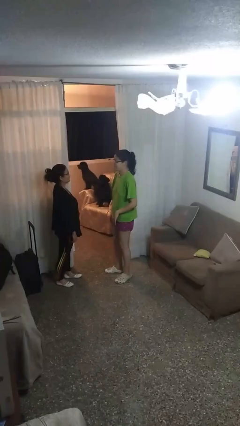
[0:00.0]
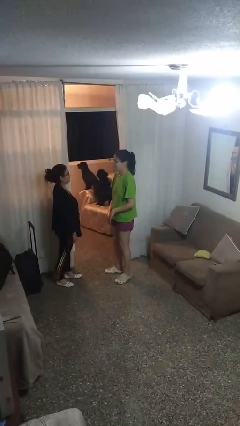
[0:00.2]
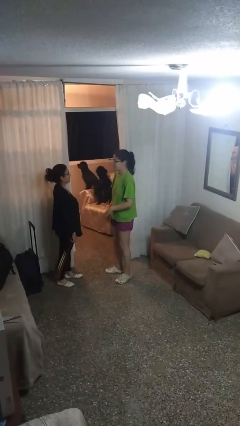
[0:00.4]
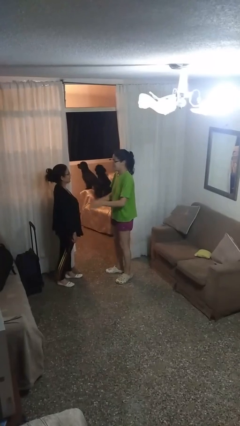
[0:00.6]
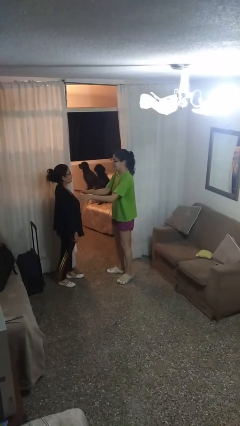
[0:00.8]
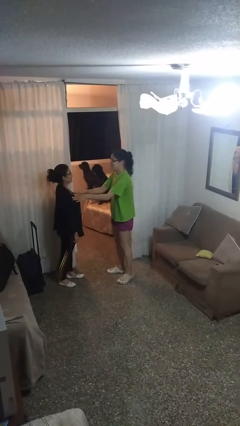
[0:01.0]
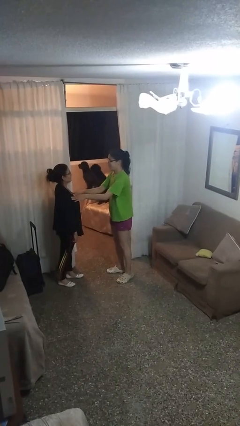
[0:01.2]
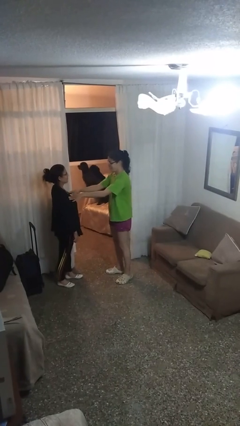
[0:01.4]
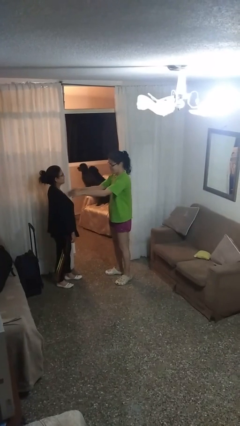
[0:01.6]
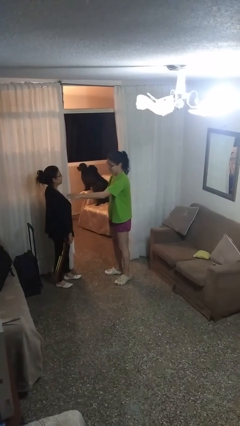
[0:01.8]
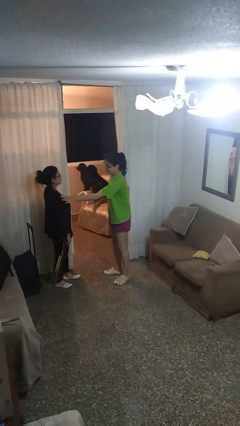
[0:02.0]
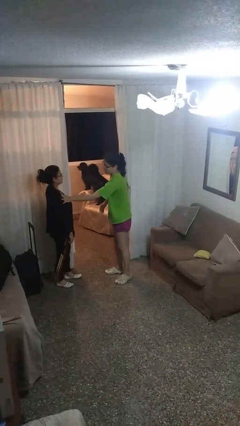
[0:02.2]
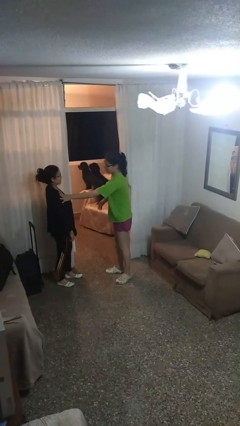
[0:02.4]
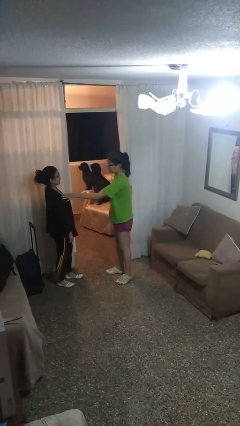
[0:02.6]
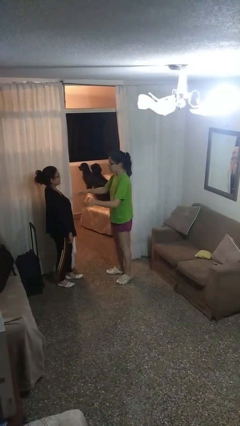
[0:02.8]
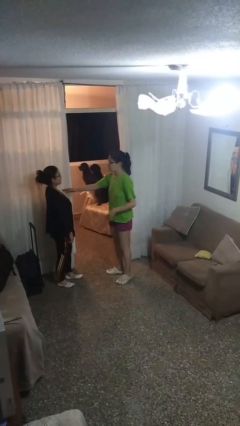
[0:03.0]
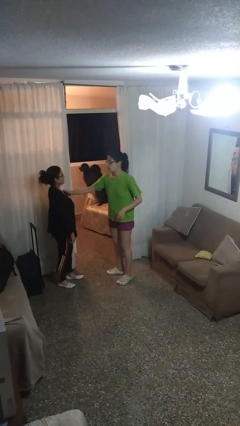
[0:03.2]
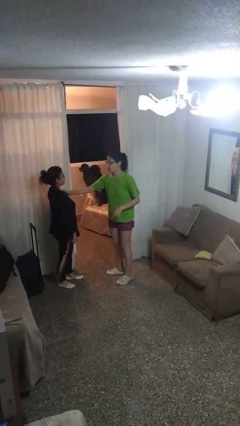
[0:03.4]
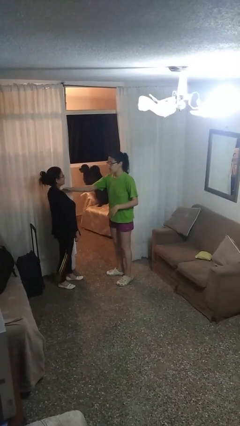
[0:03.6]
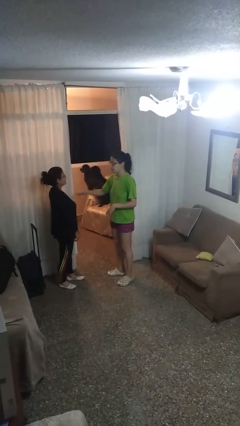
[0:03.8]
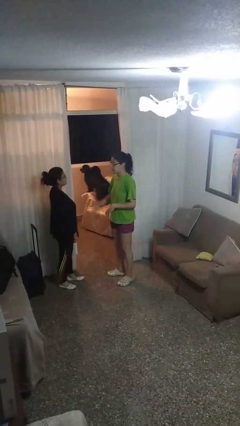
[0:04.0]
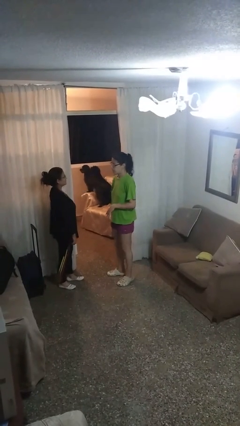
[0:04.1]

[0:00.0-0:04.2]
person shoves person

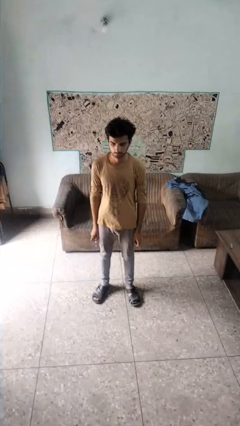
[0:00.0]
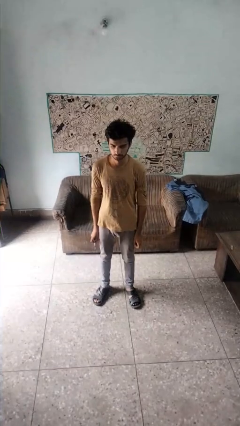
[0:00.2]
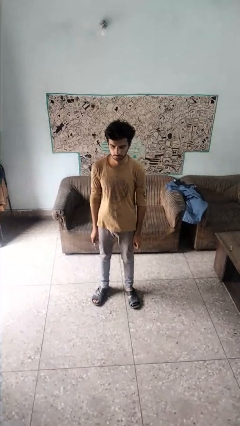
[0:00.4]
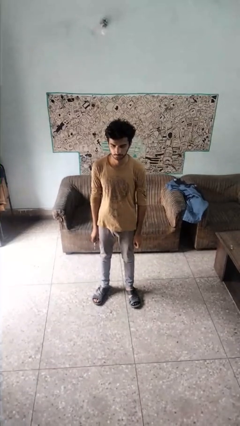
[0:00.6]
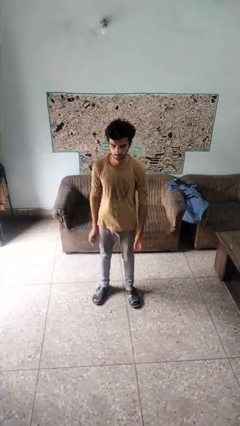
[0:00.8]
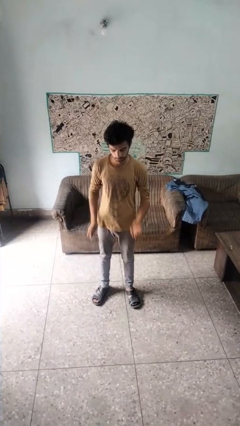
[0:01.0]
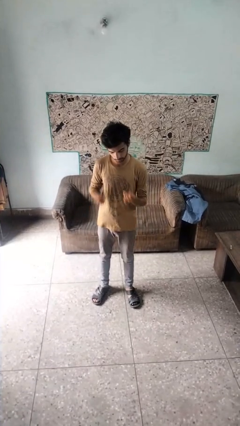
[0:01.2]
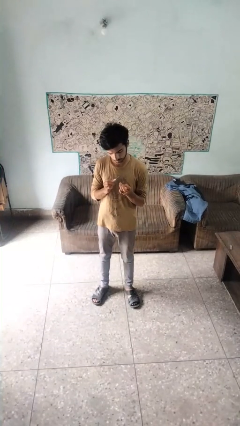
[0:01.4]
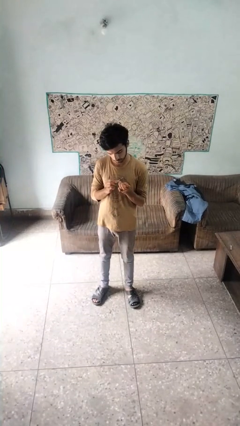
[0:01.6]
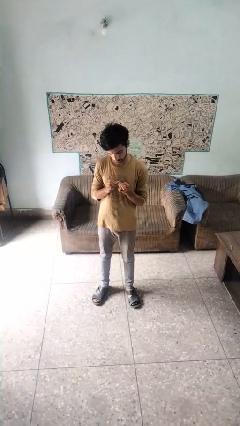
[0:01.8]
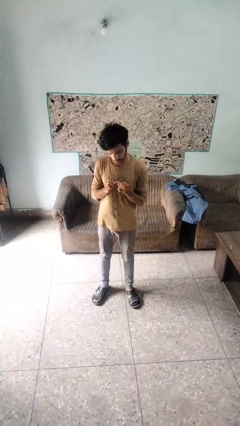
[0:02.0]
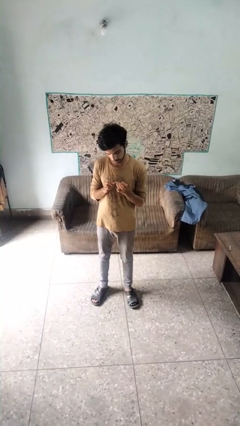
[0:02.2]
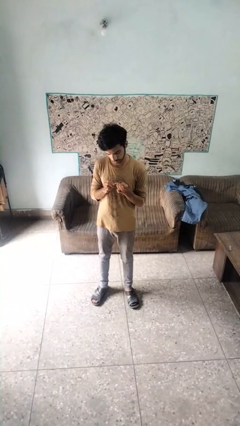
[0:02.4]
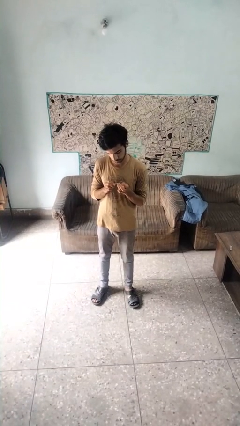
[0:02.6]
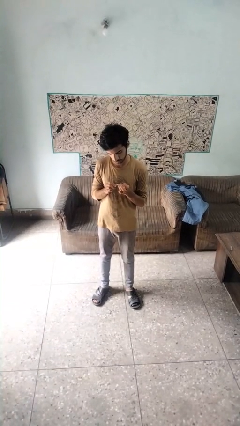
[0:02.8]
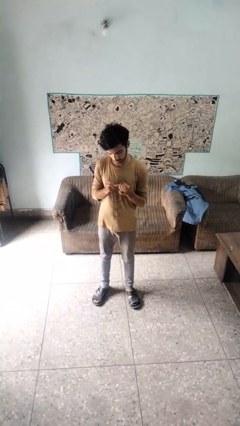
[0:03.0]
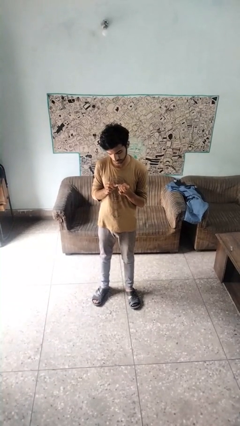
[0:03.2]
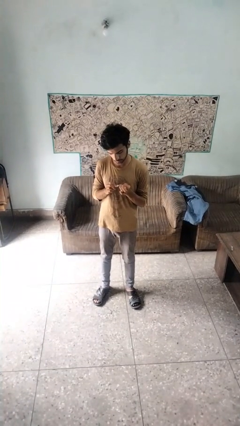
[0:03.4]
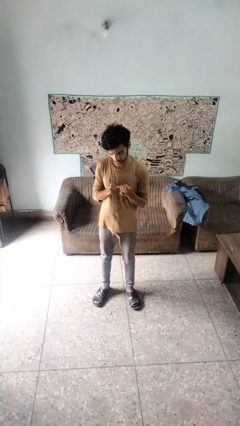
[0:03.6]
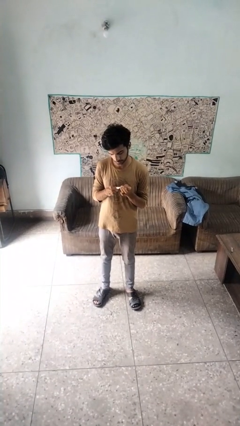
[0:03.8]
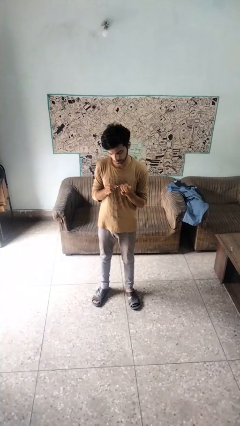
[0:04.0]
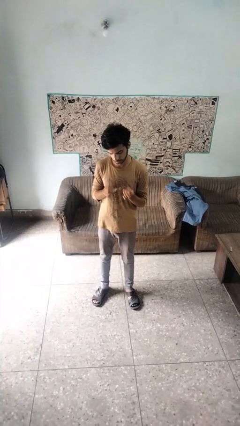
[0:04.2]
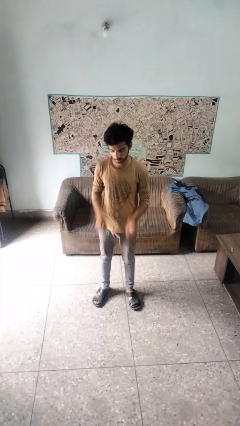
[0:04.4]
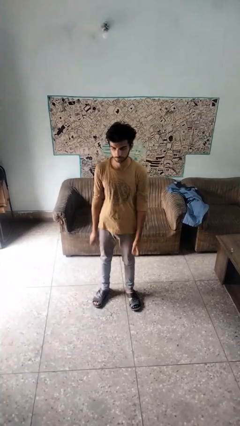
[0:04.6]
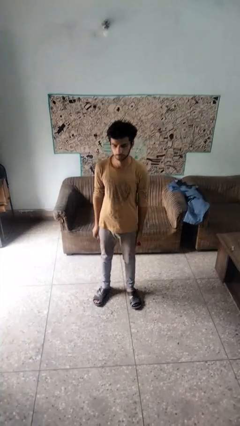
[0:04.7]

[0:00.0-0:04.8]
person files fingernails

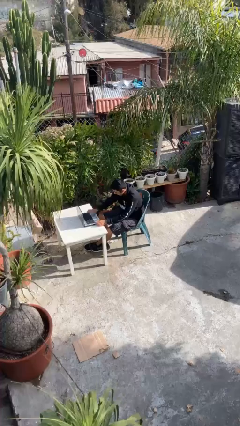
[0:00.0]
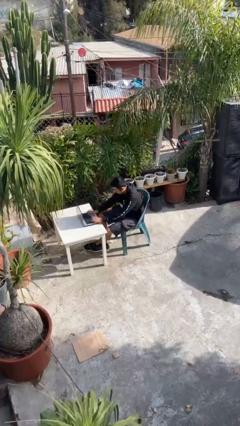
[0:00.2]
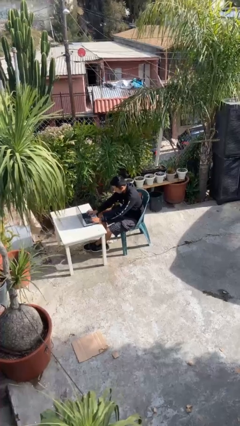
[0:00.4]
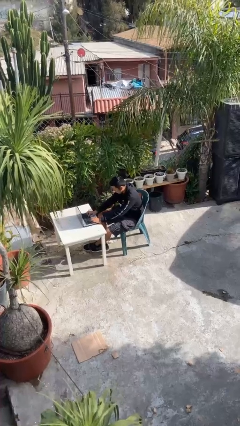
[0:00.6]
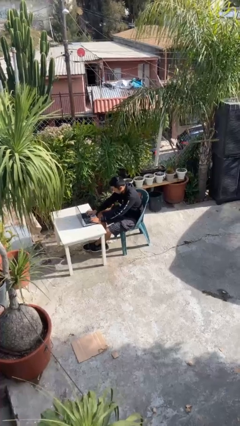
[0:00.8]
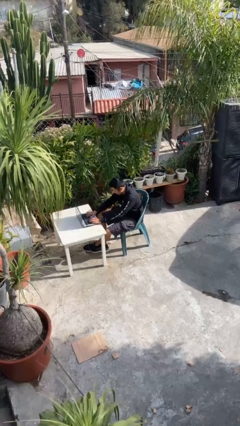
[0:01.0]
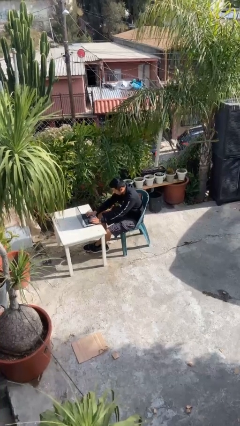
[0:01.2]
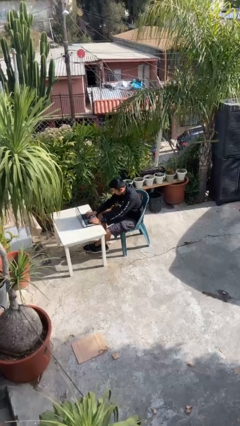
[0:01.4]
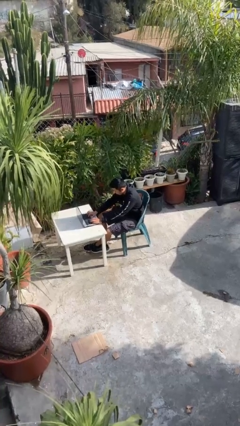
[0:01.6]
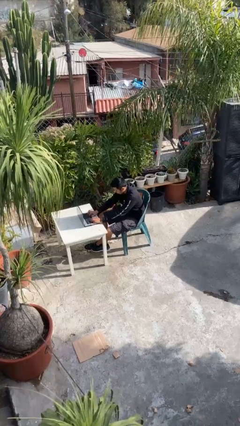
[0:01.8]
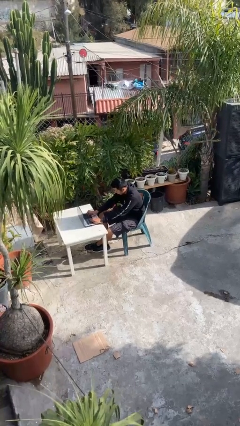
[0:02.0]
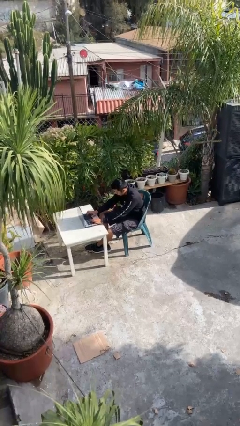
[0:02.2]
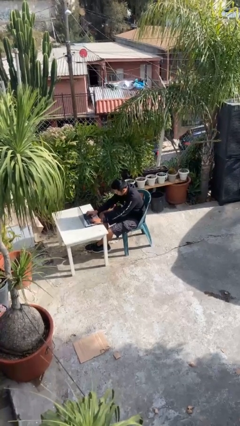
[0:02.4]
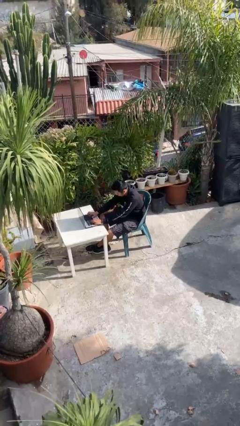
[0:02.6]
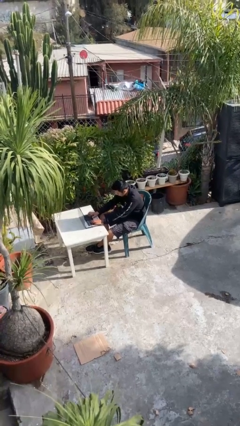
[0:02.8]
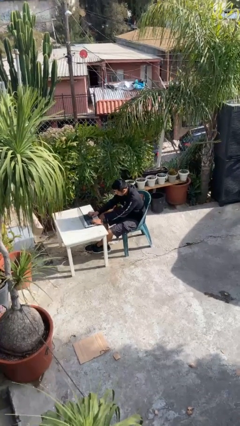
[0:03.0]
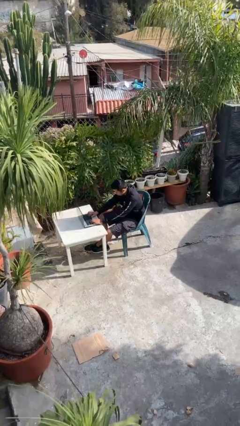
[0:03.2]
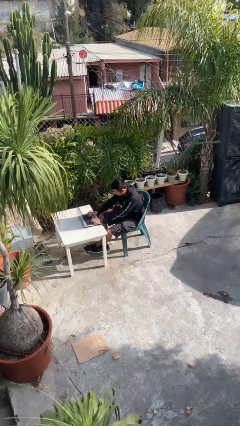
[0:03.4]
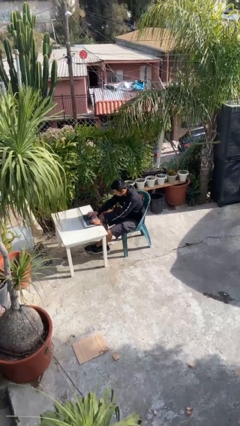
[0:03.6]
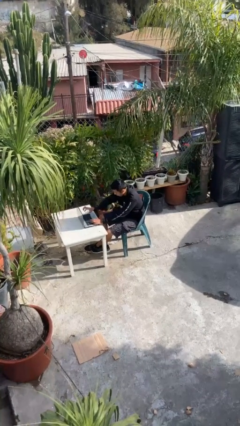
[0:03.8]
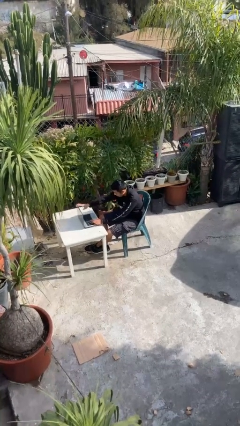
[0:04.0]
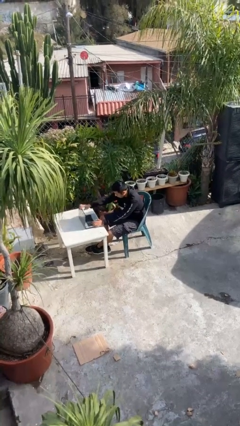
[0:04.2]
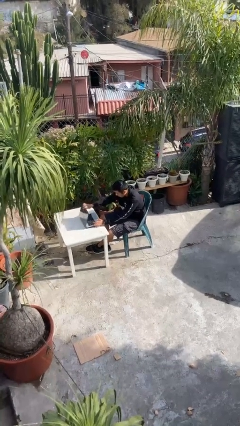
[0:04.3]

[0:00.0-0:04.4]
person interacts with laptop

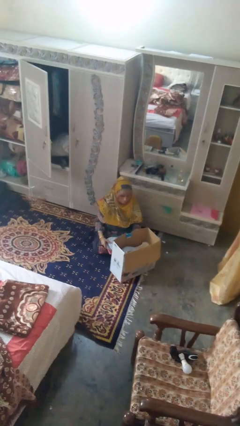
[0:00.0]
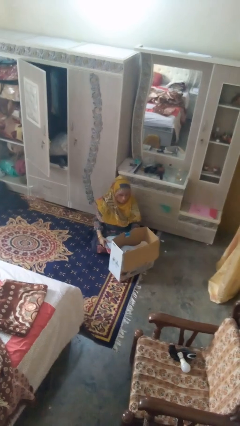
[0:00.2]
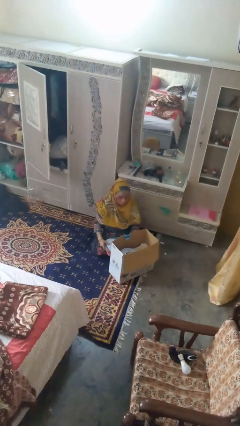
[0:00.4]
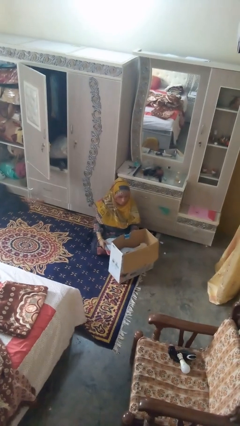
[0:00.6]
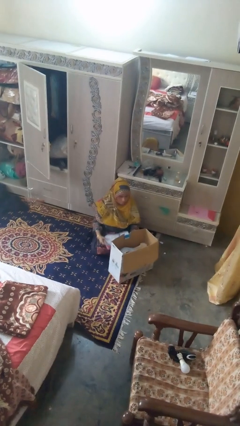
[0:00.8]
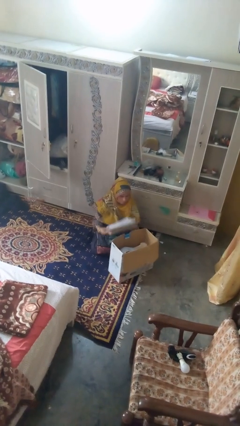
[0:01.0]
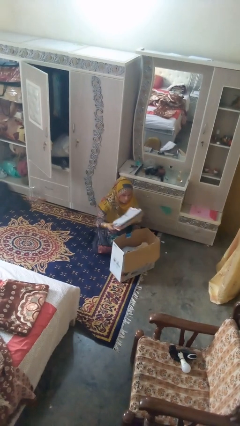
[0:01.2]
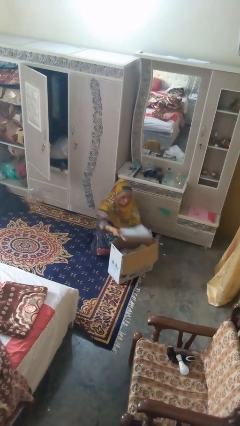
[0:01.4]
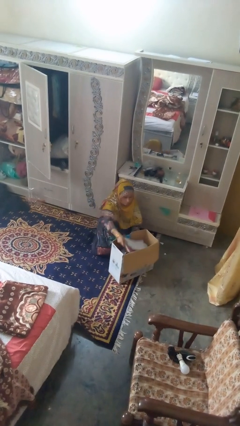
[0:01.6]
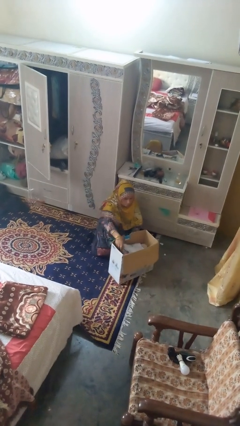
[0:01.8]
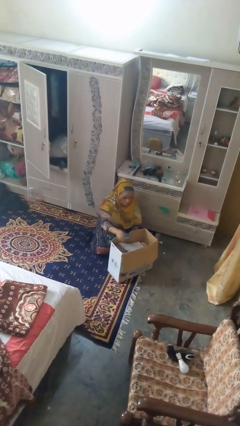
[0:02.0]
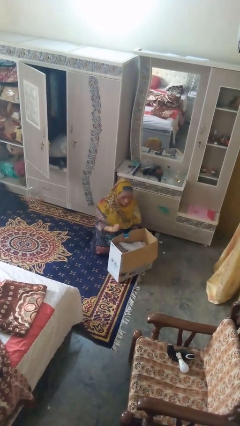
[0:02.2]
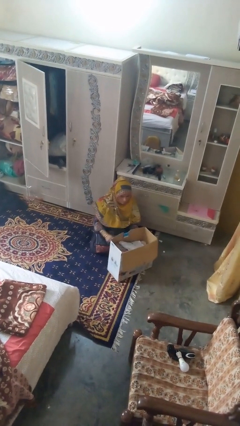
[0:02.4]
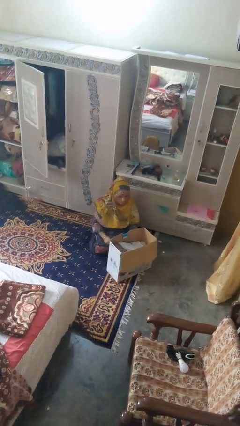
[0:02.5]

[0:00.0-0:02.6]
person puts object into box

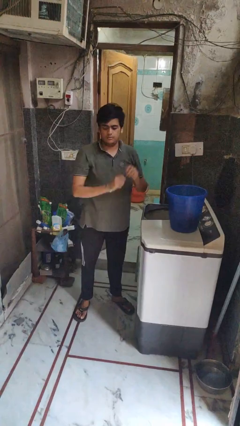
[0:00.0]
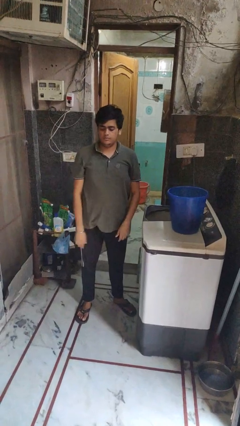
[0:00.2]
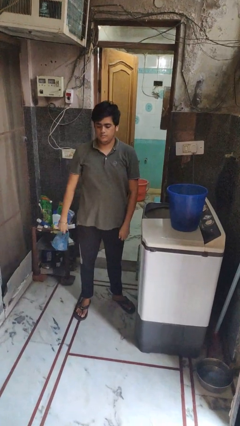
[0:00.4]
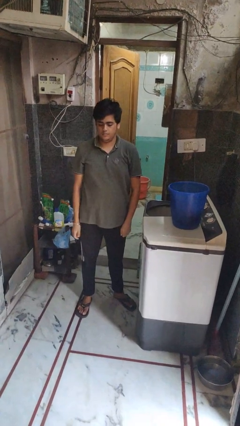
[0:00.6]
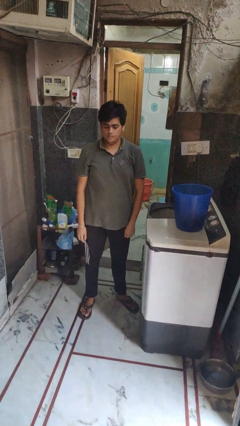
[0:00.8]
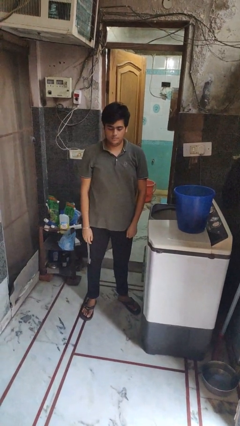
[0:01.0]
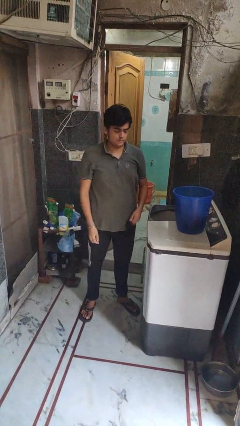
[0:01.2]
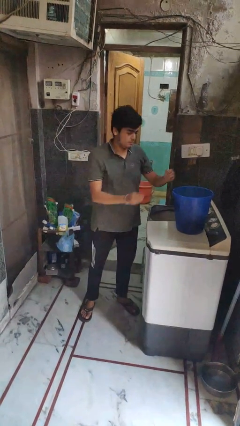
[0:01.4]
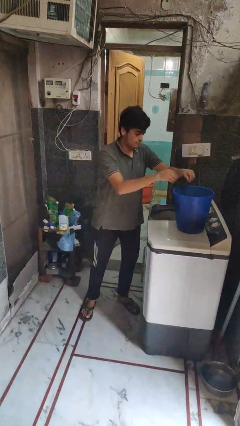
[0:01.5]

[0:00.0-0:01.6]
person loads clotheswasher

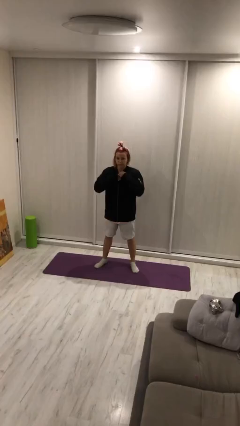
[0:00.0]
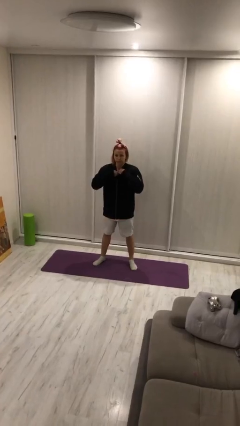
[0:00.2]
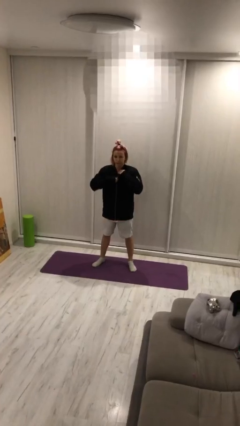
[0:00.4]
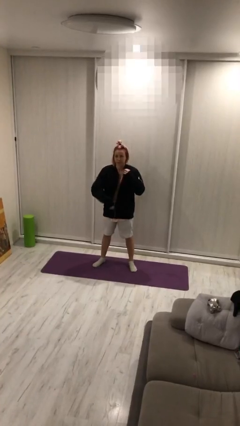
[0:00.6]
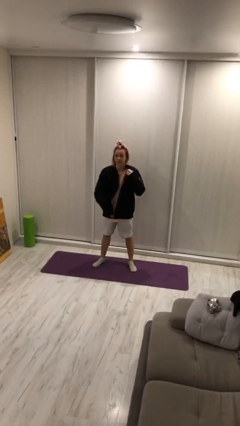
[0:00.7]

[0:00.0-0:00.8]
person unzips jacket
